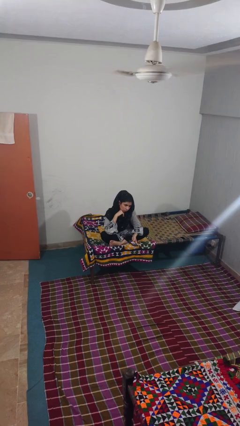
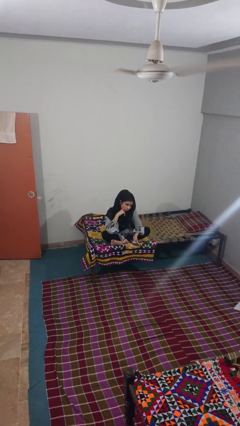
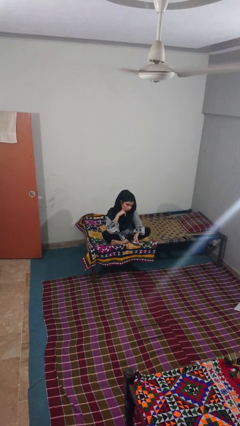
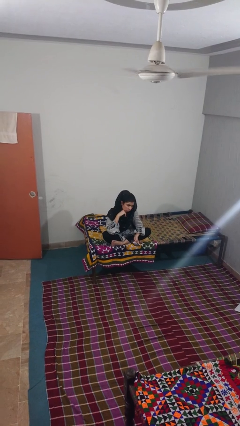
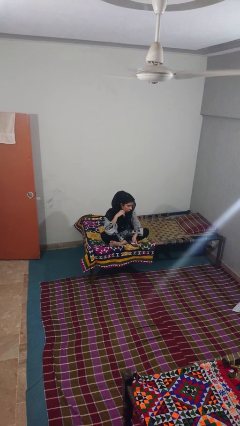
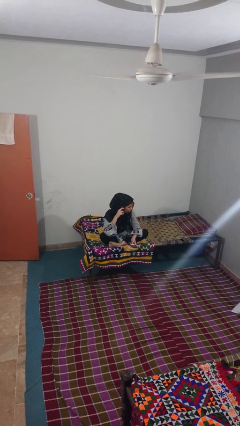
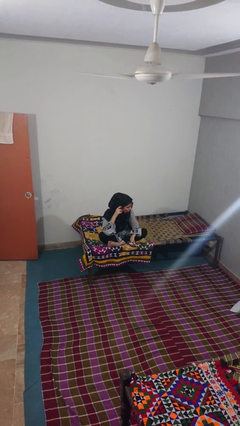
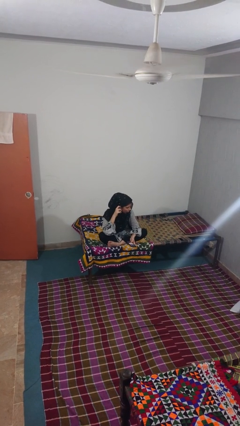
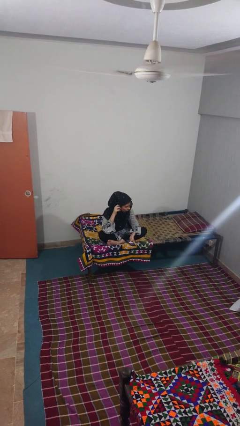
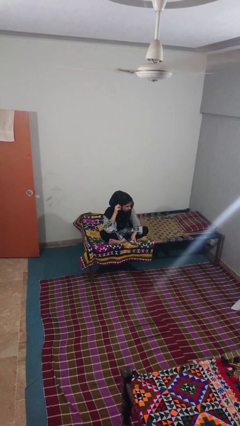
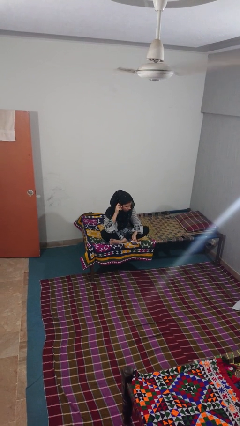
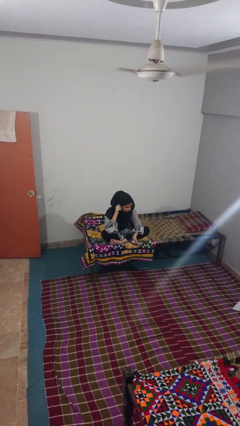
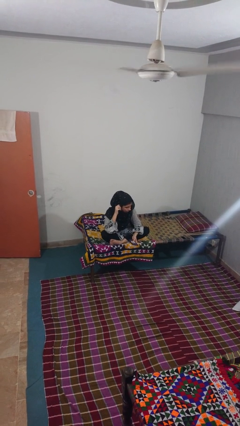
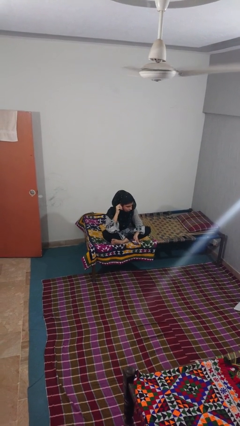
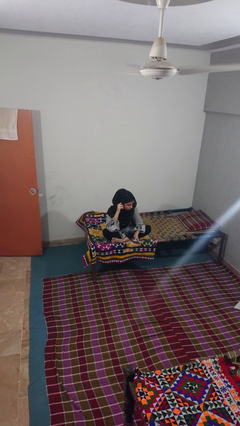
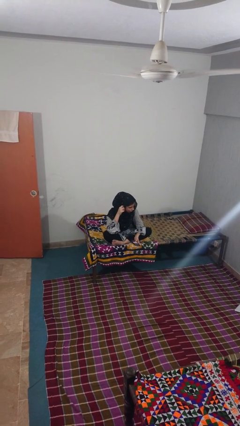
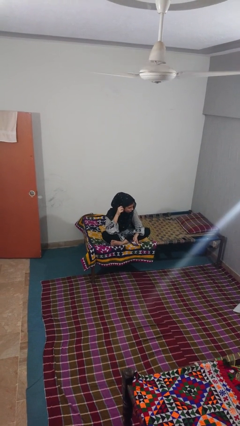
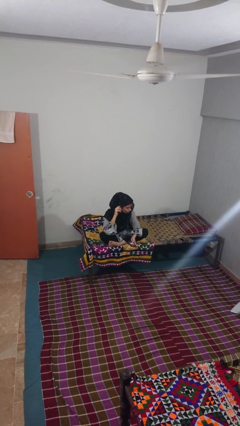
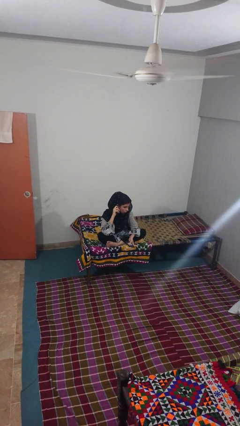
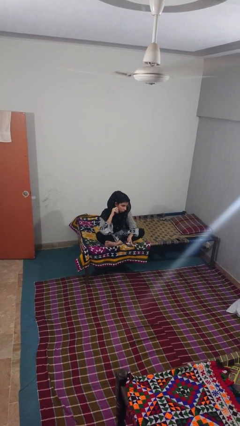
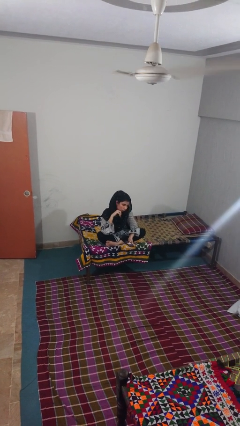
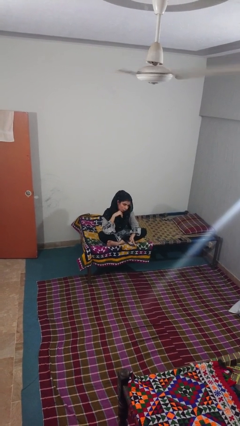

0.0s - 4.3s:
person touches earlobe

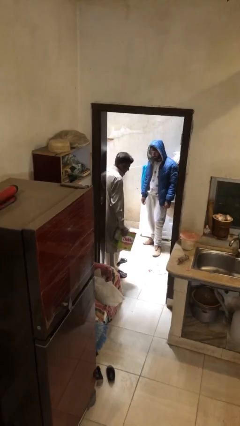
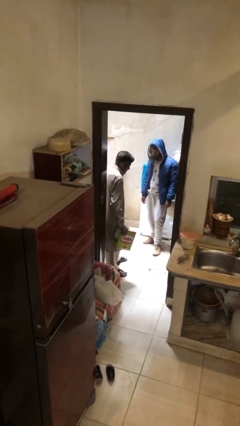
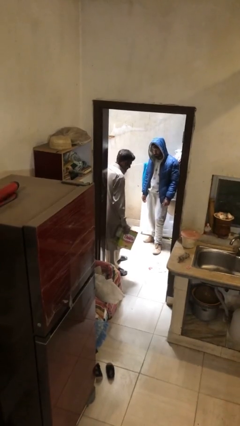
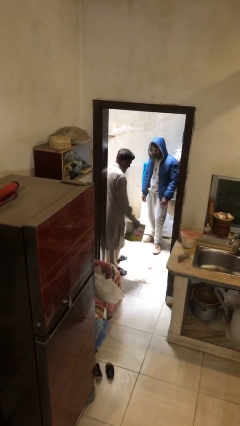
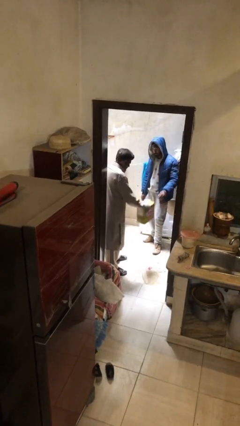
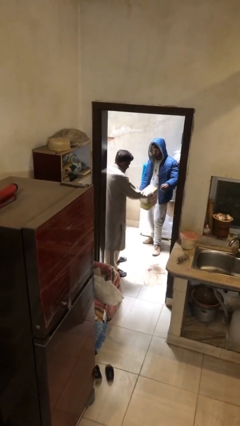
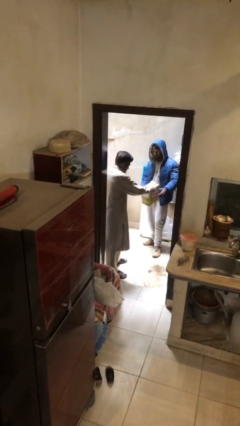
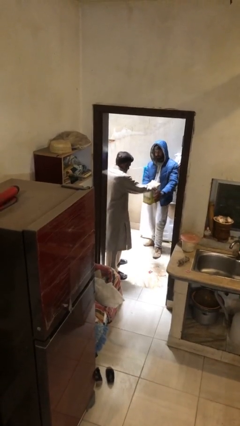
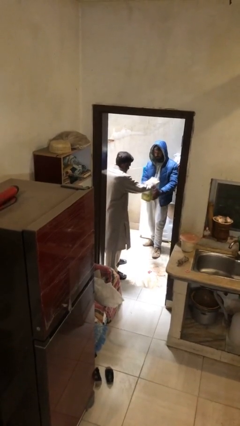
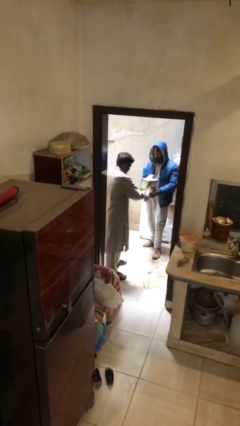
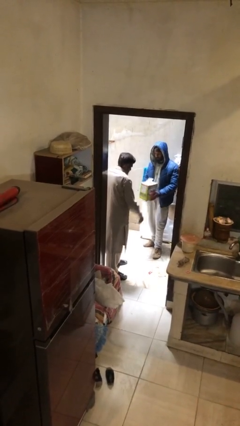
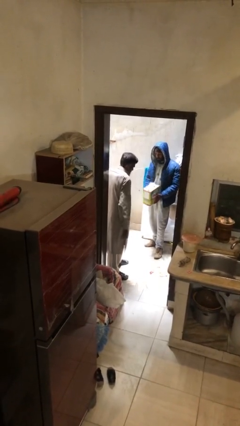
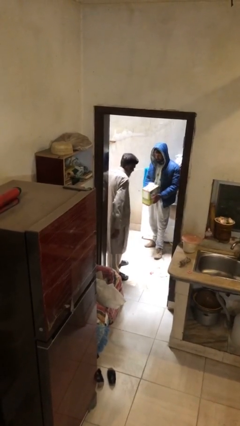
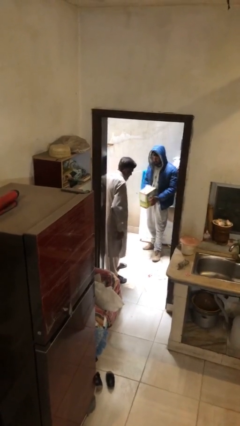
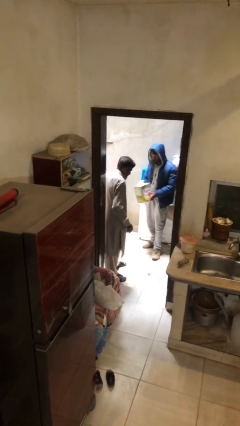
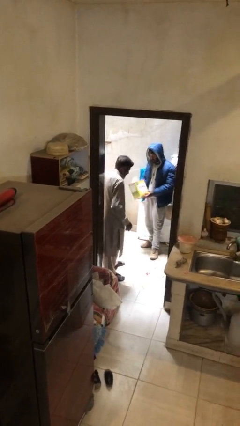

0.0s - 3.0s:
person transfers object to person

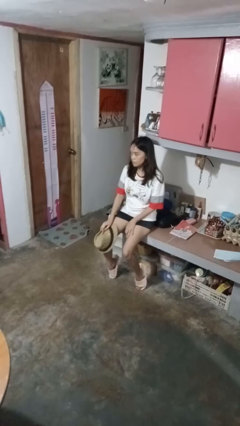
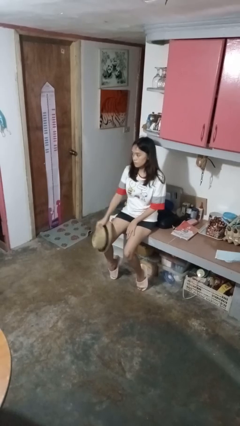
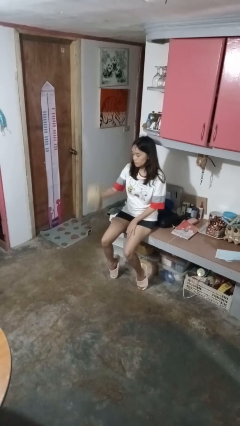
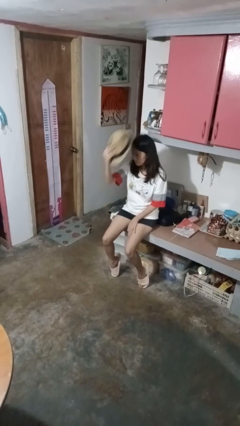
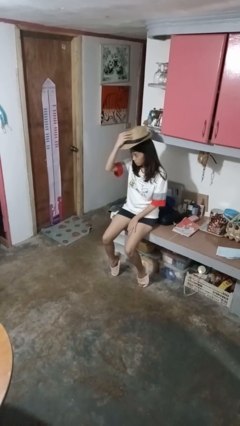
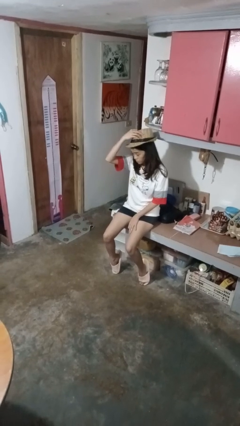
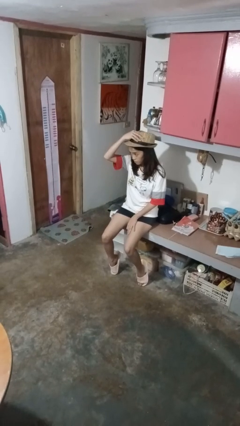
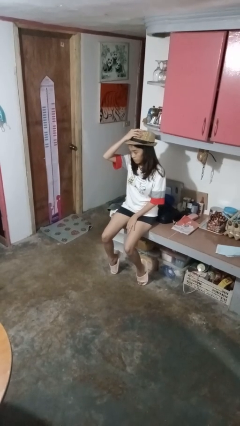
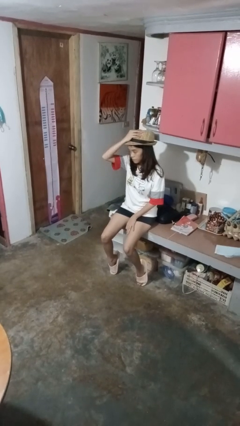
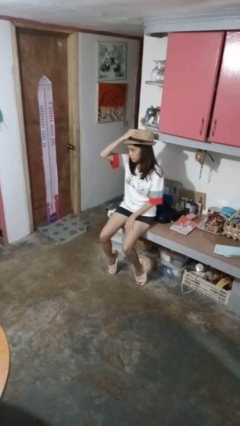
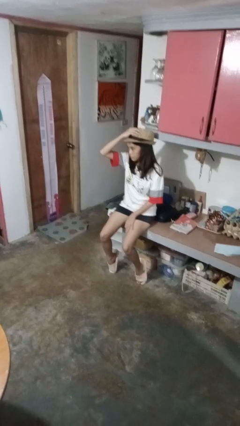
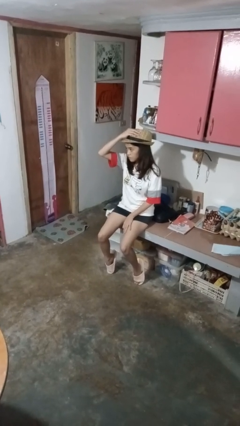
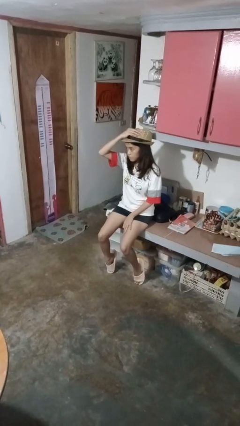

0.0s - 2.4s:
person puts on hat

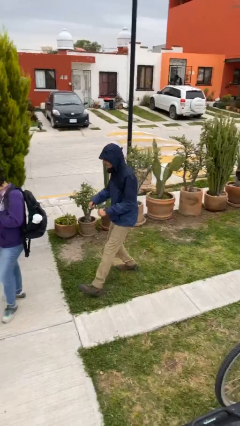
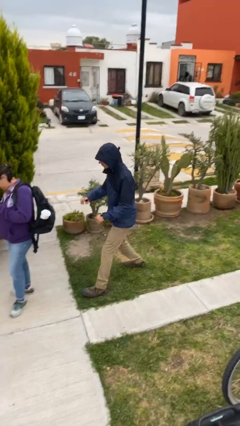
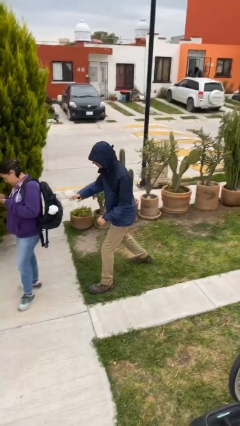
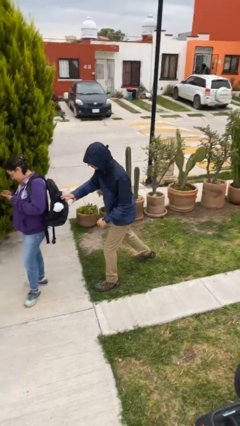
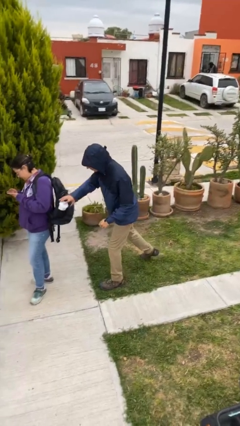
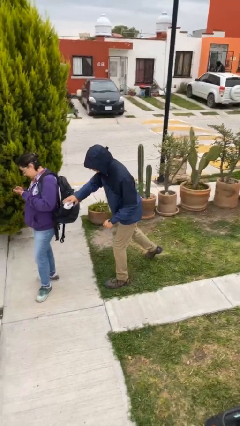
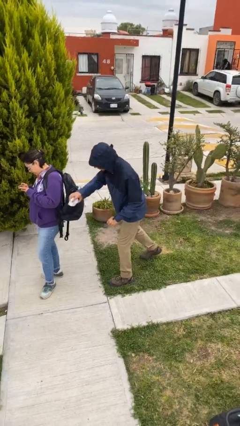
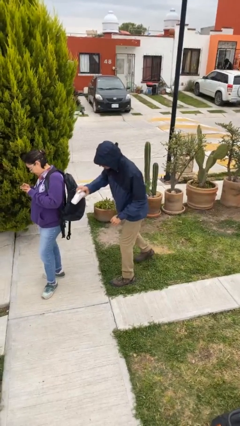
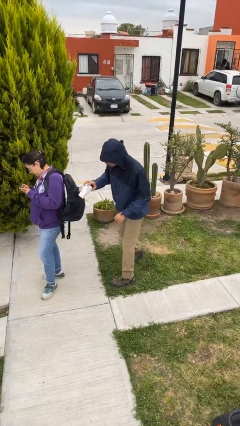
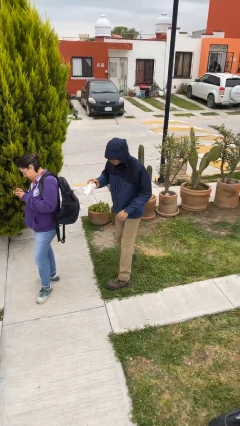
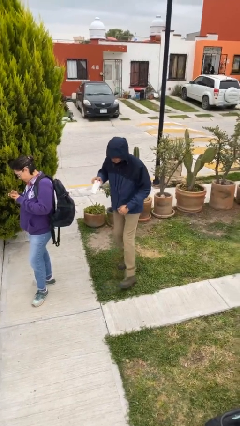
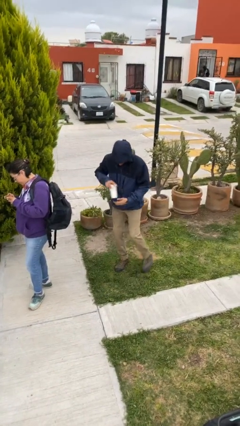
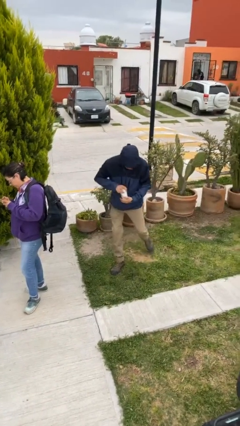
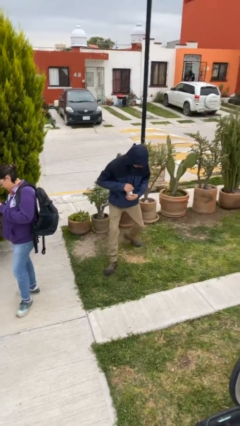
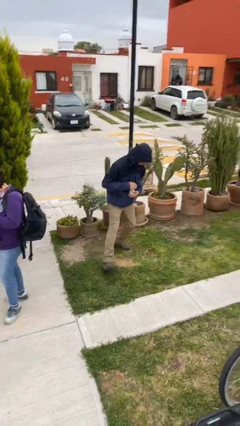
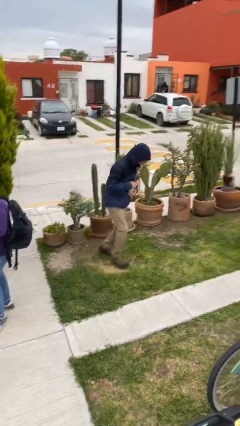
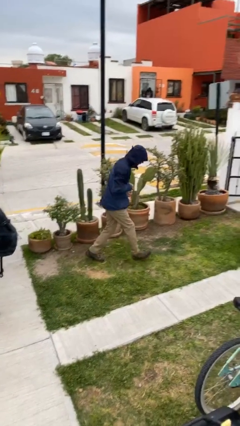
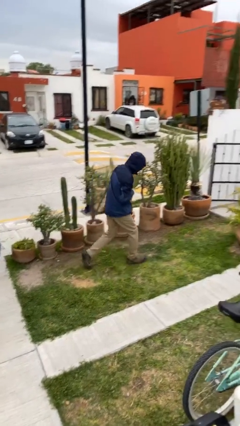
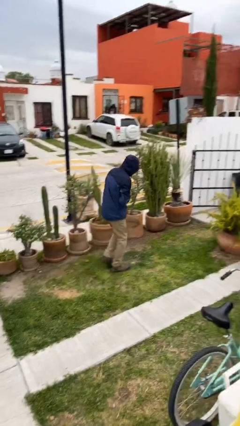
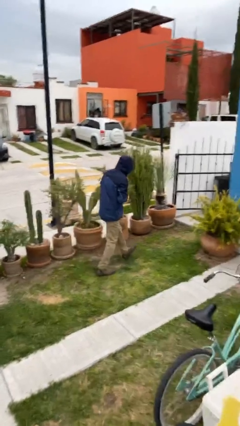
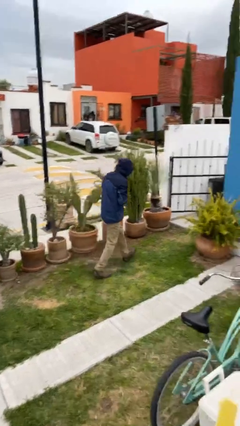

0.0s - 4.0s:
person steals object from person

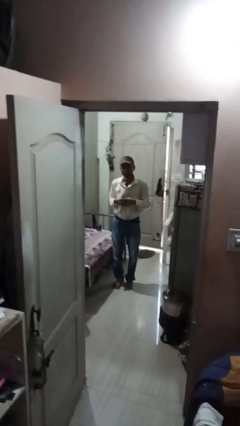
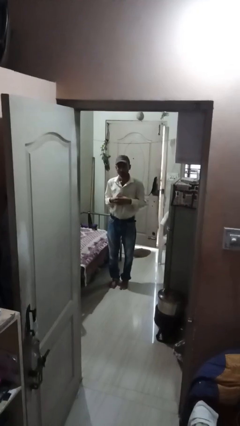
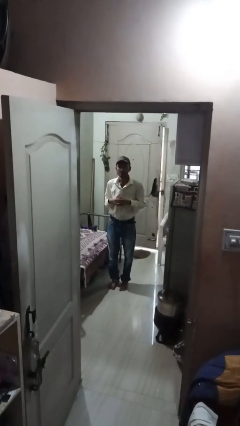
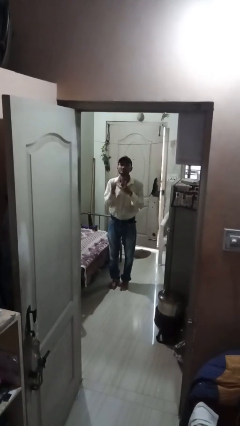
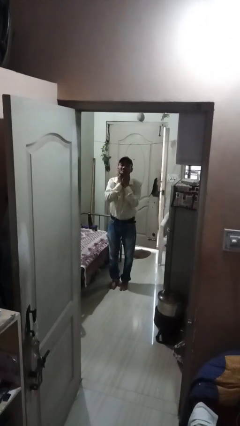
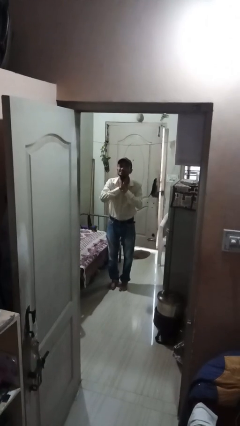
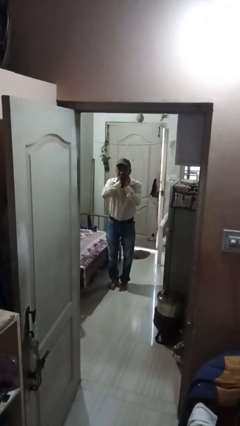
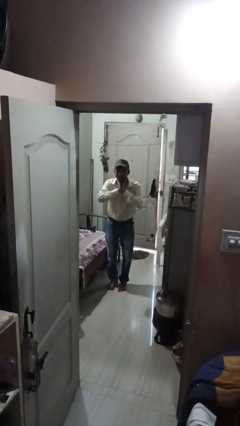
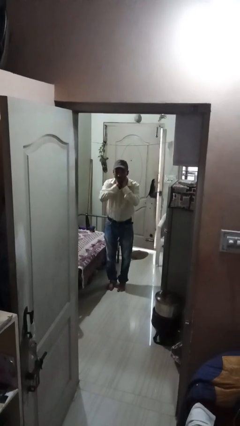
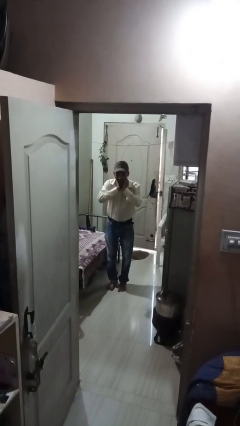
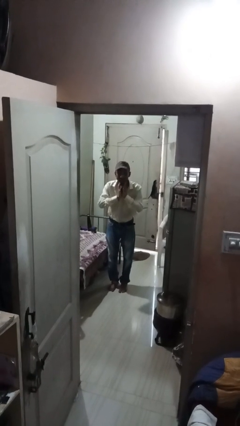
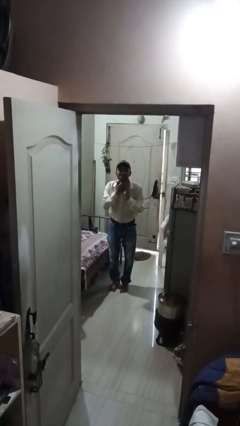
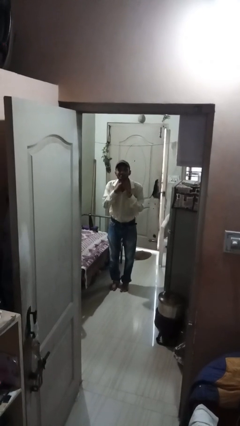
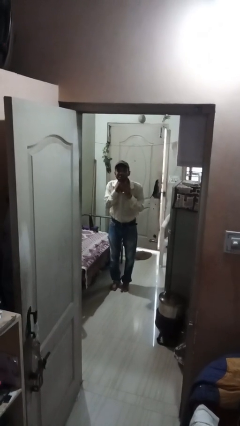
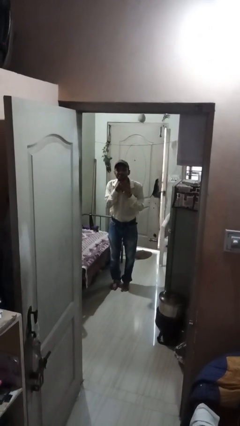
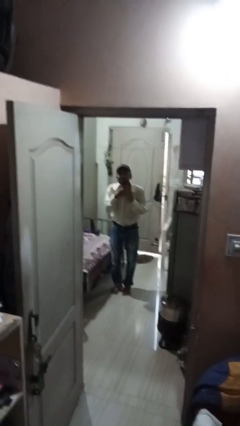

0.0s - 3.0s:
person rubs neck

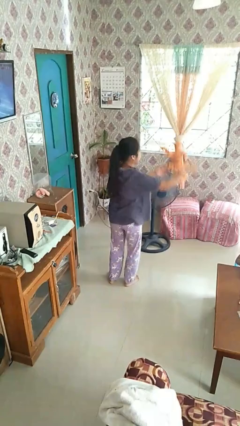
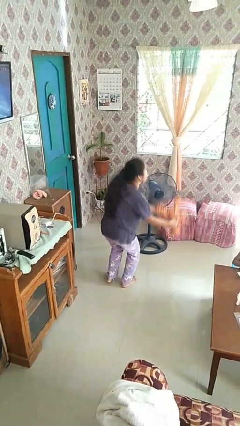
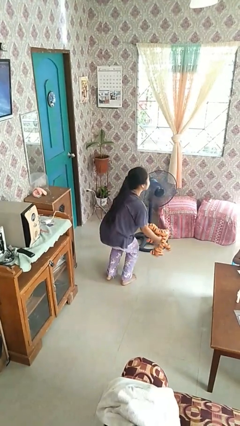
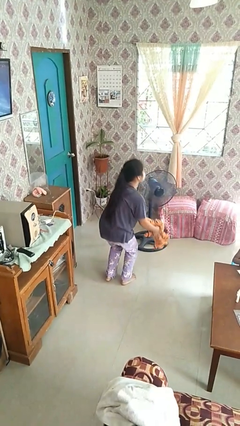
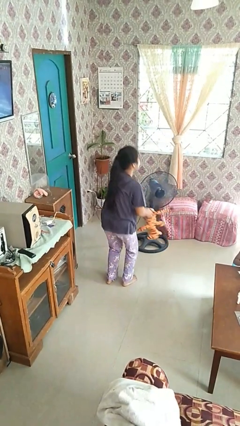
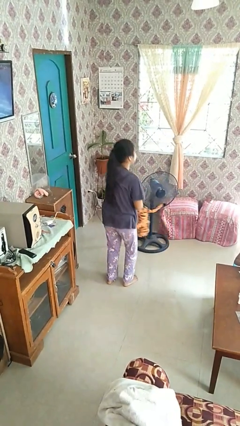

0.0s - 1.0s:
person catches dropped object
